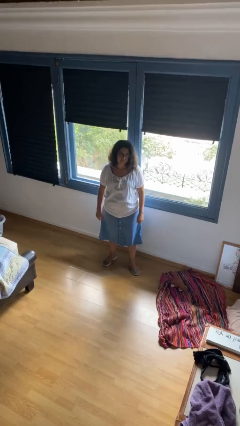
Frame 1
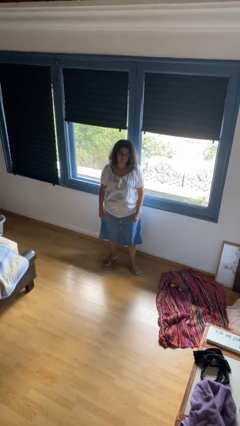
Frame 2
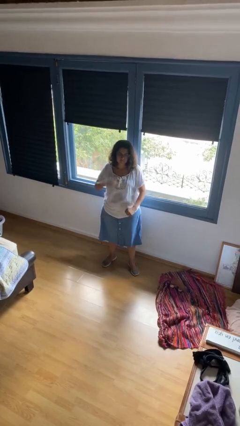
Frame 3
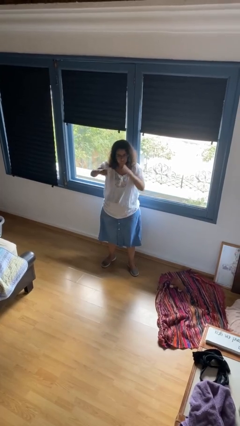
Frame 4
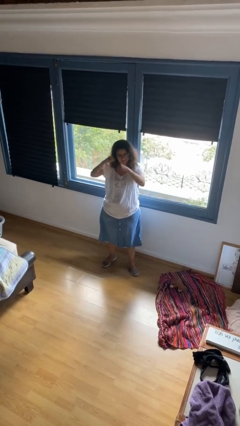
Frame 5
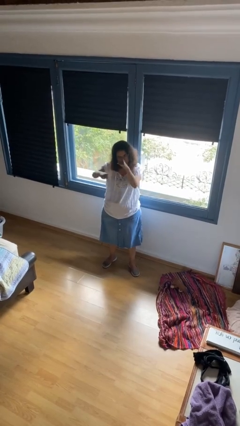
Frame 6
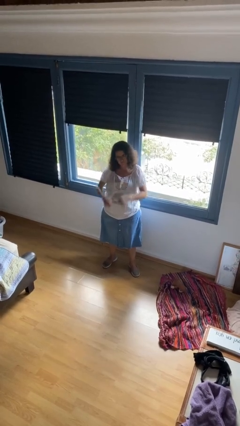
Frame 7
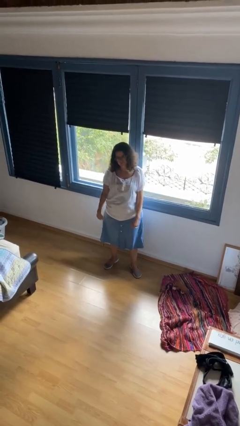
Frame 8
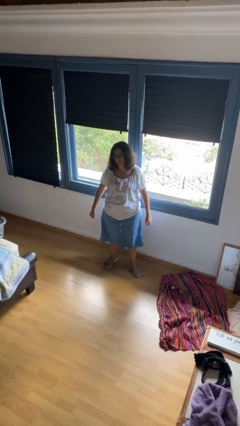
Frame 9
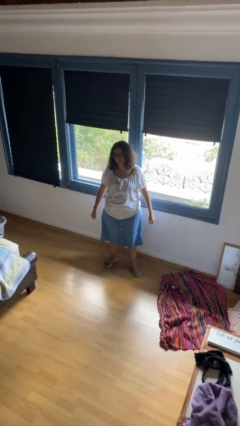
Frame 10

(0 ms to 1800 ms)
person punches

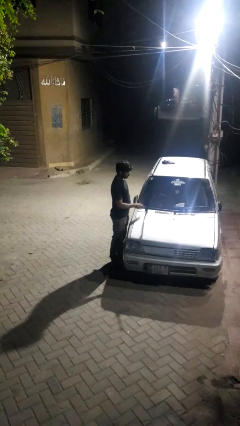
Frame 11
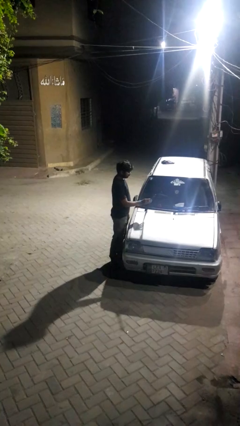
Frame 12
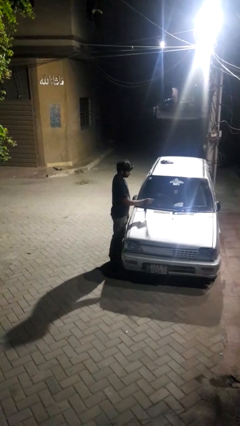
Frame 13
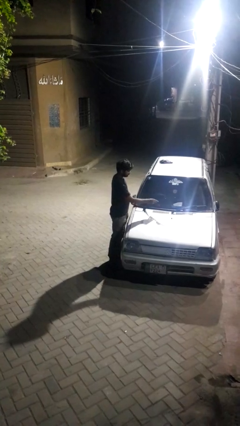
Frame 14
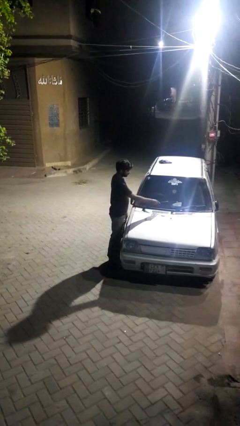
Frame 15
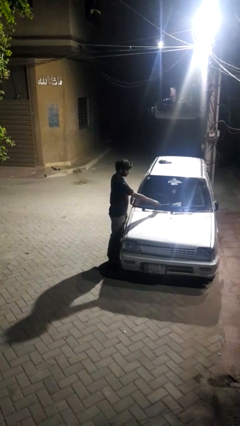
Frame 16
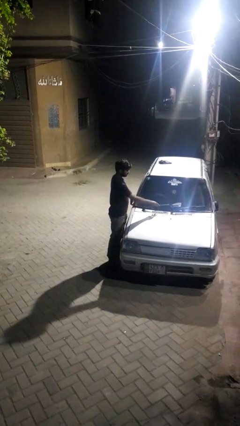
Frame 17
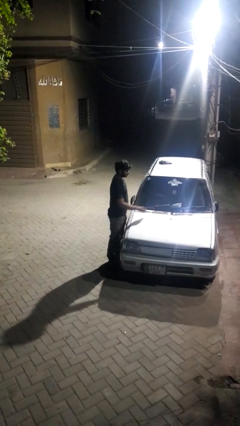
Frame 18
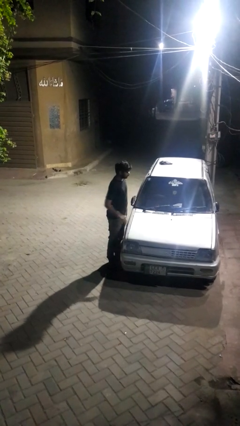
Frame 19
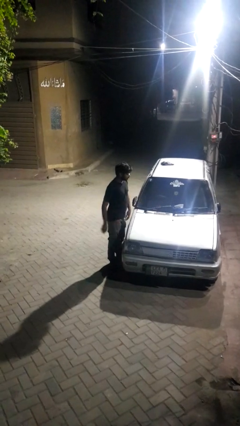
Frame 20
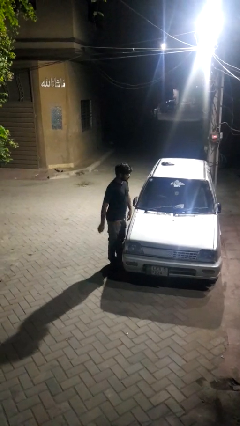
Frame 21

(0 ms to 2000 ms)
person flips down car wipers

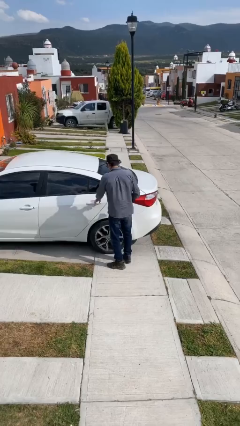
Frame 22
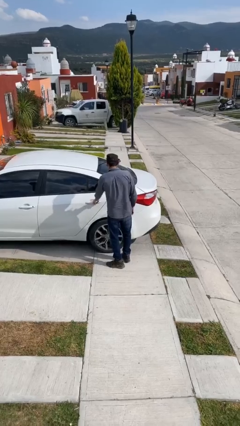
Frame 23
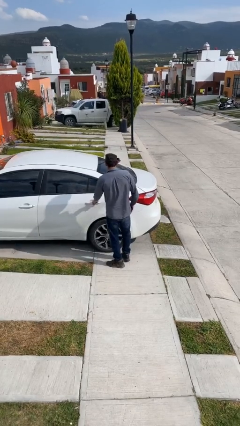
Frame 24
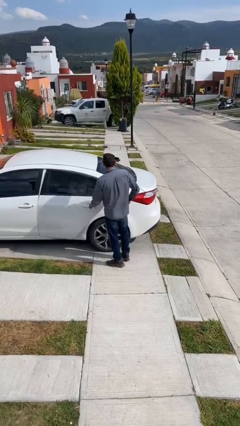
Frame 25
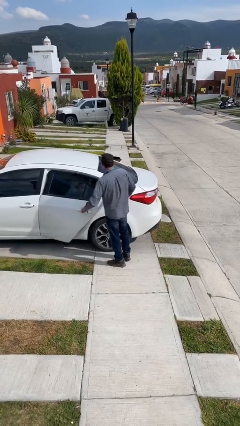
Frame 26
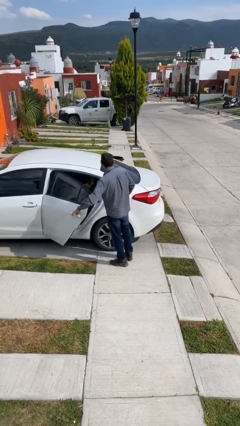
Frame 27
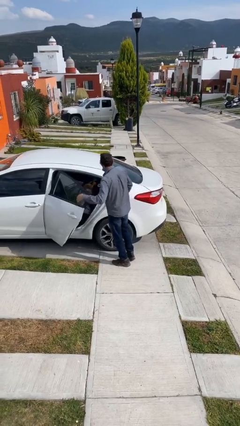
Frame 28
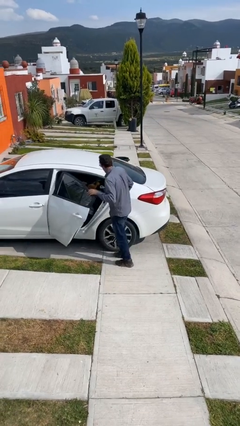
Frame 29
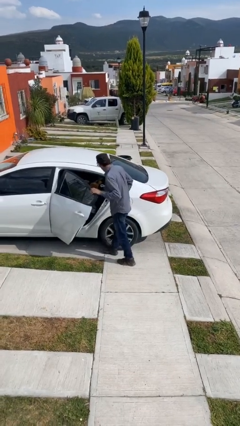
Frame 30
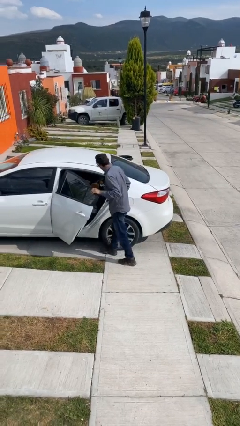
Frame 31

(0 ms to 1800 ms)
person opens car door

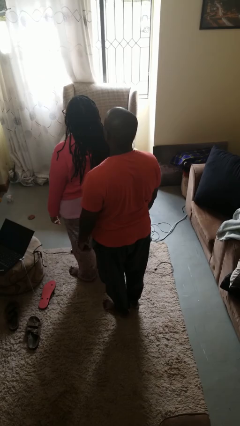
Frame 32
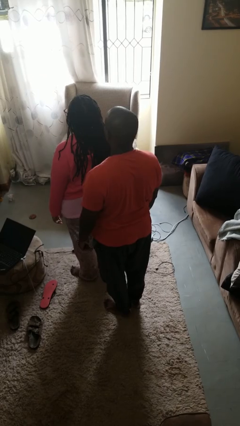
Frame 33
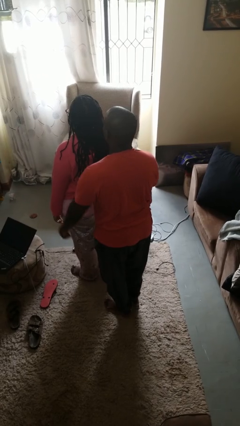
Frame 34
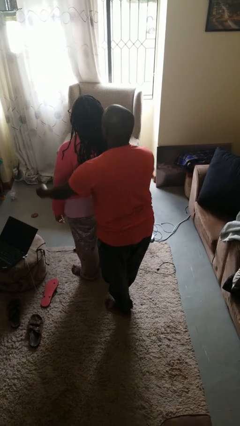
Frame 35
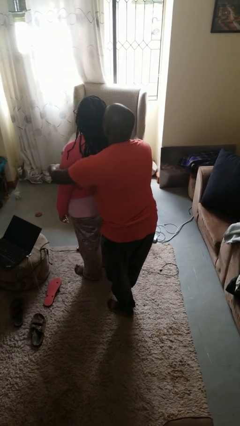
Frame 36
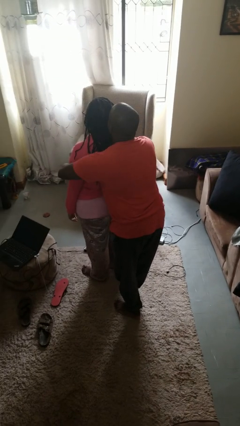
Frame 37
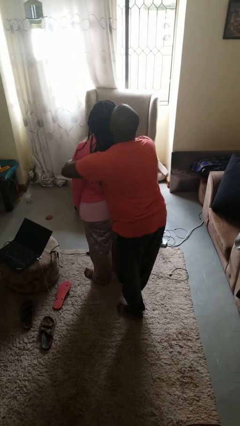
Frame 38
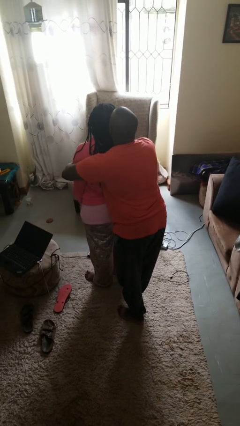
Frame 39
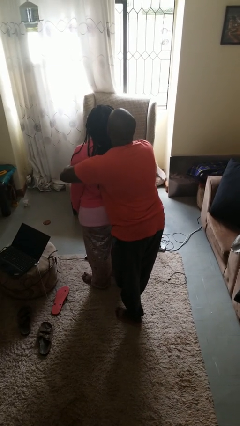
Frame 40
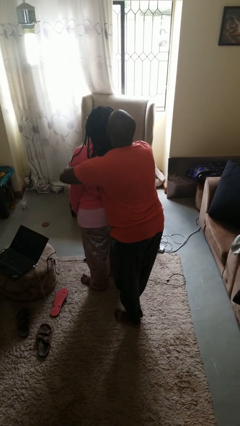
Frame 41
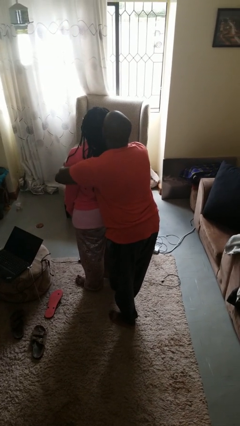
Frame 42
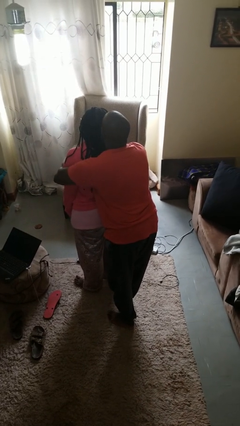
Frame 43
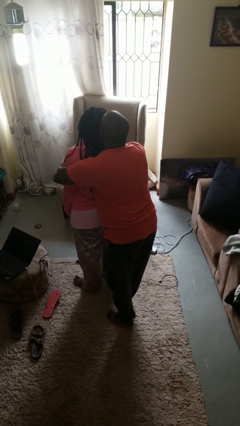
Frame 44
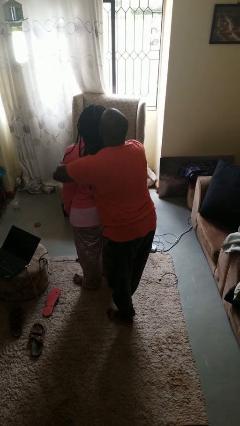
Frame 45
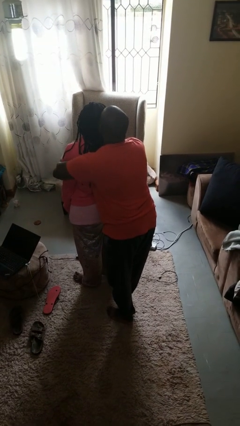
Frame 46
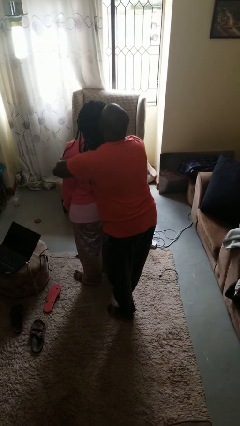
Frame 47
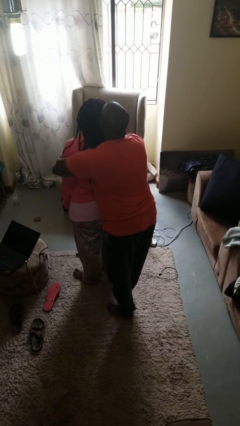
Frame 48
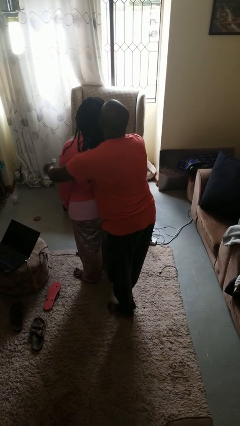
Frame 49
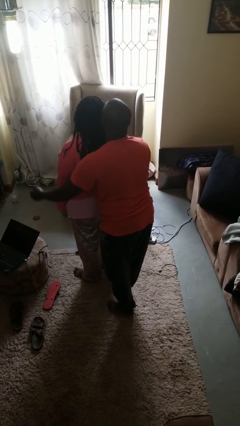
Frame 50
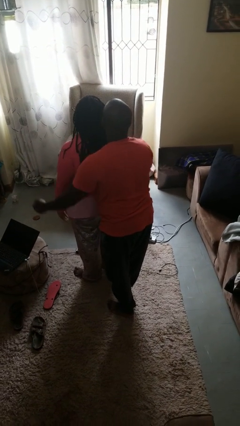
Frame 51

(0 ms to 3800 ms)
person hugs person from behind

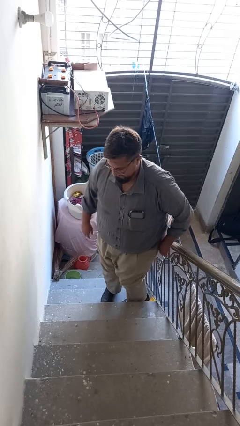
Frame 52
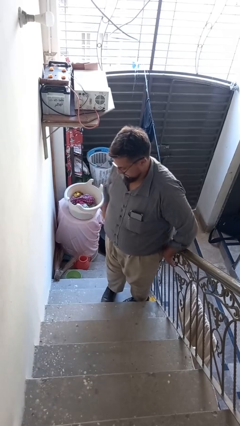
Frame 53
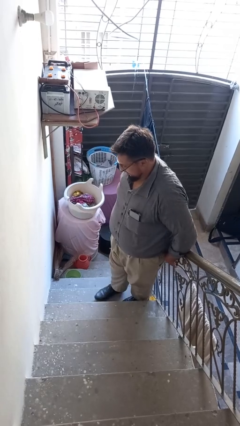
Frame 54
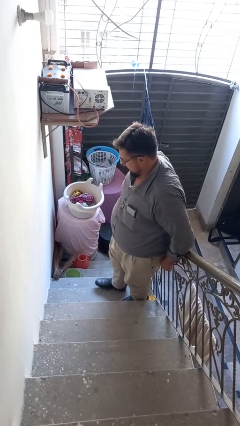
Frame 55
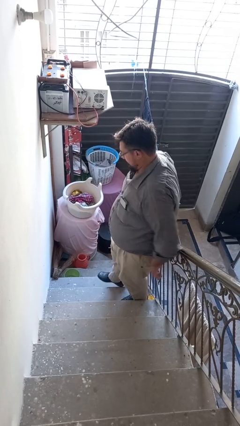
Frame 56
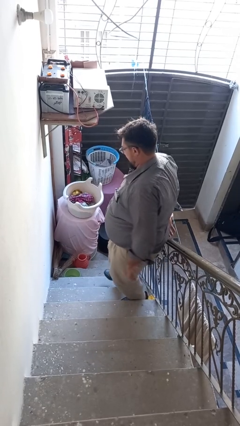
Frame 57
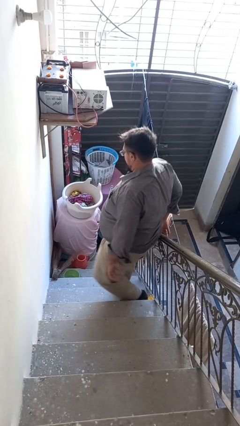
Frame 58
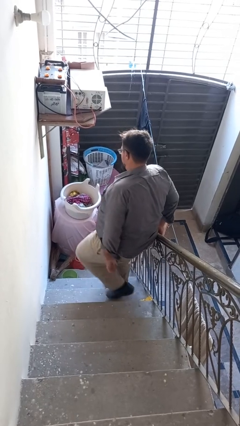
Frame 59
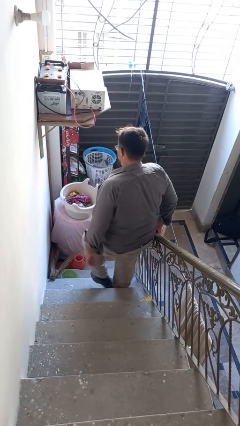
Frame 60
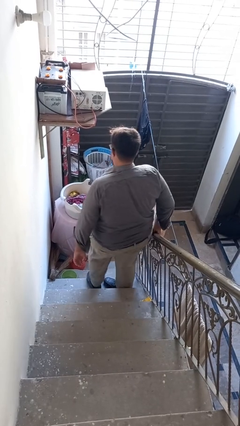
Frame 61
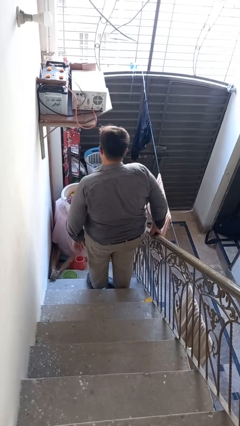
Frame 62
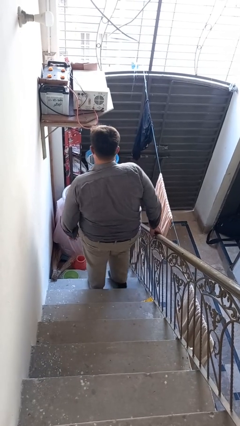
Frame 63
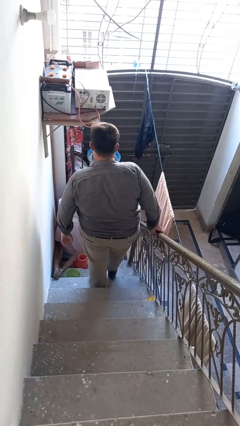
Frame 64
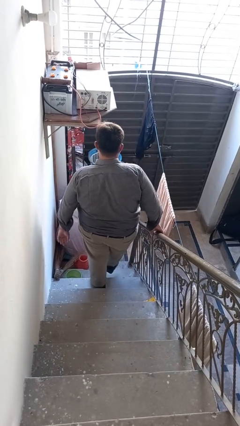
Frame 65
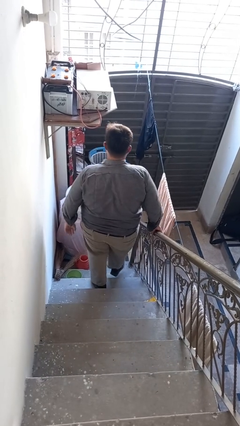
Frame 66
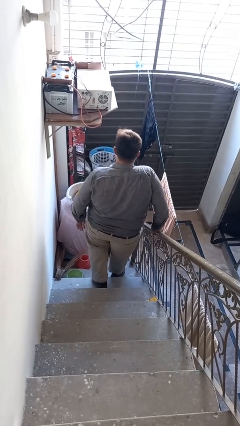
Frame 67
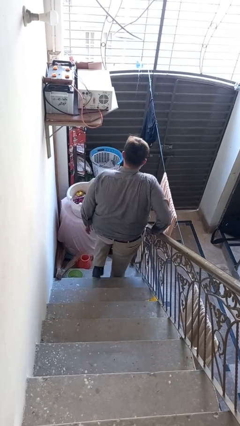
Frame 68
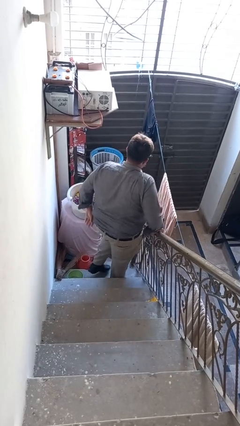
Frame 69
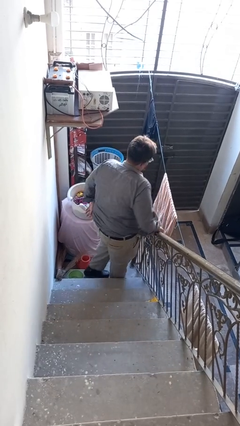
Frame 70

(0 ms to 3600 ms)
person climbs down stairs

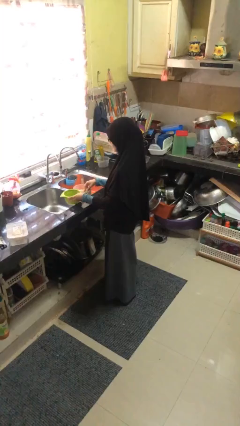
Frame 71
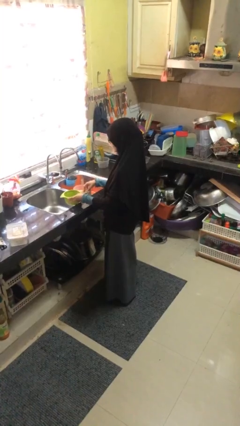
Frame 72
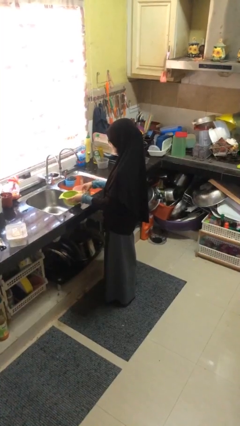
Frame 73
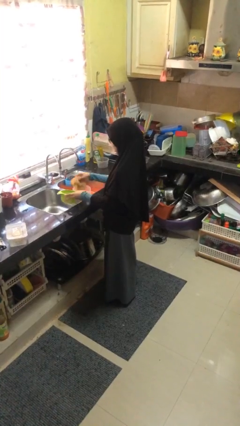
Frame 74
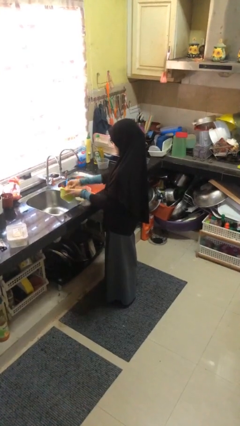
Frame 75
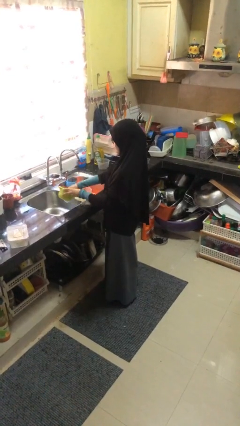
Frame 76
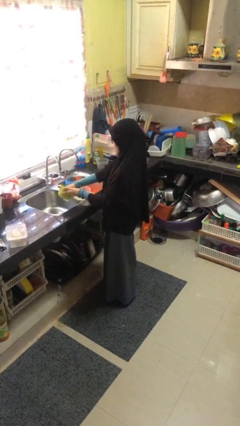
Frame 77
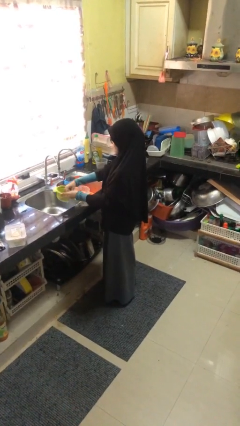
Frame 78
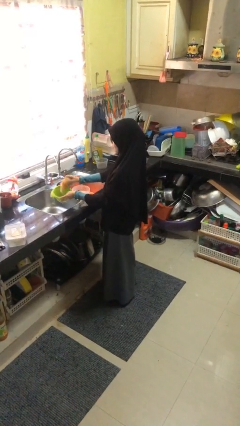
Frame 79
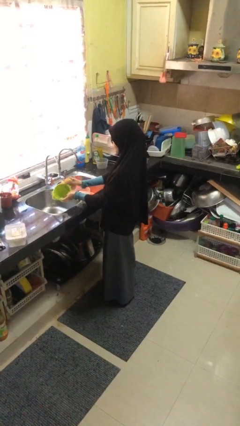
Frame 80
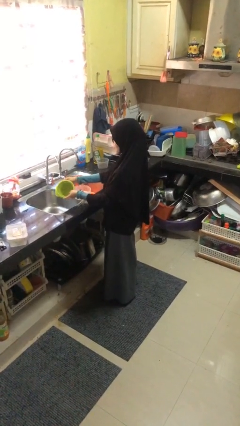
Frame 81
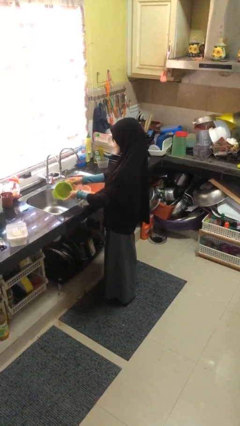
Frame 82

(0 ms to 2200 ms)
person washes dish

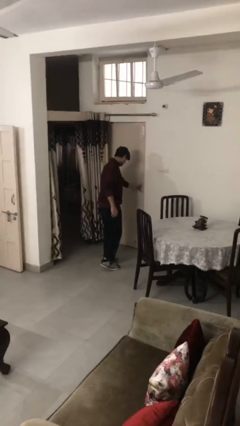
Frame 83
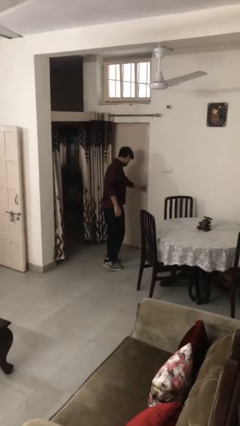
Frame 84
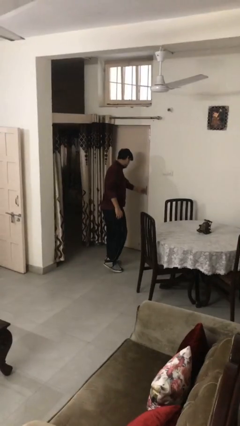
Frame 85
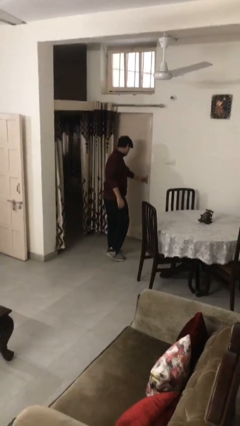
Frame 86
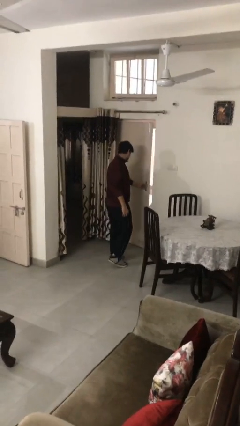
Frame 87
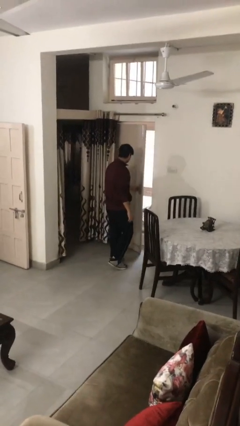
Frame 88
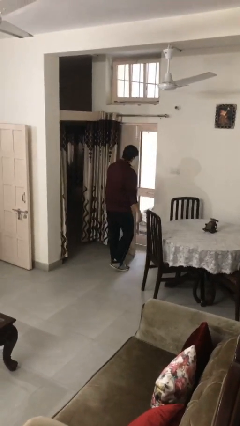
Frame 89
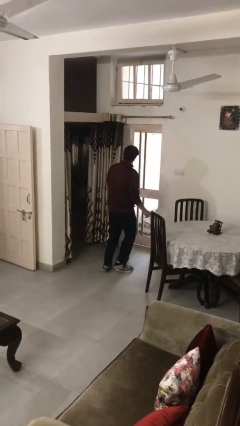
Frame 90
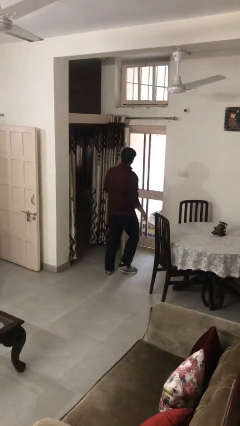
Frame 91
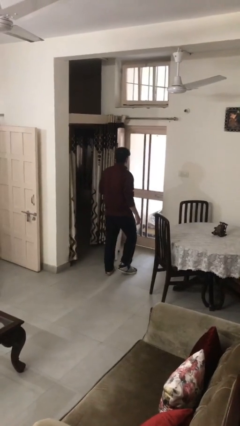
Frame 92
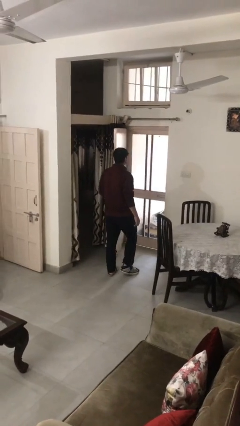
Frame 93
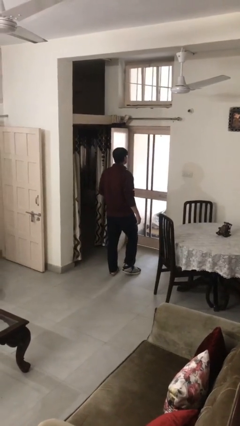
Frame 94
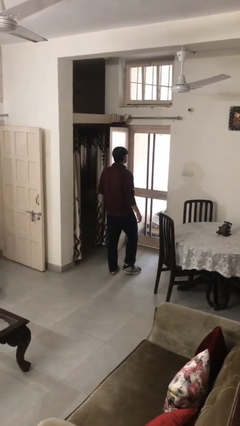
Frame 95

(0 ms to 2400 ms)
person opens facility door
